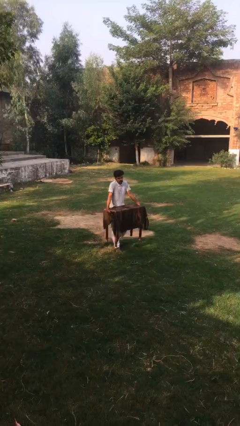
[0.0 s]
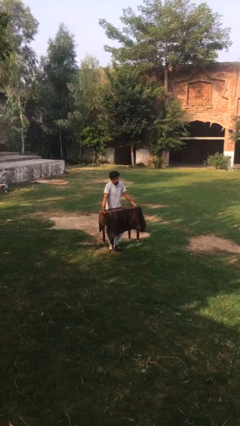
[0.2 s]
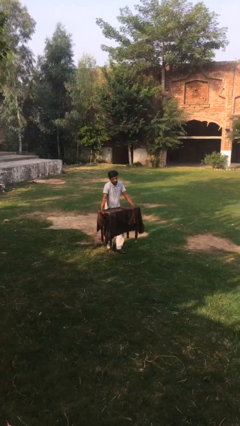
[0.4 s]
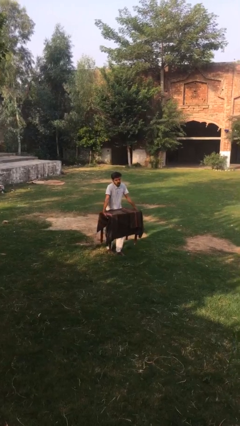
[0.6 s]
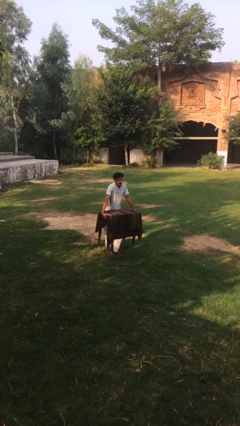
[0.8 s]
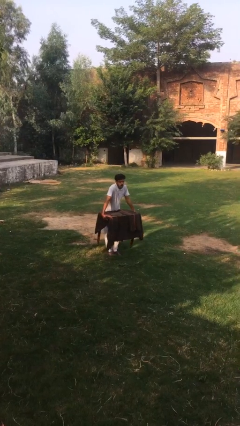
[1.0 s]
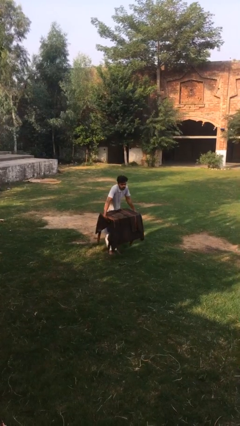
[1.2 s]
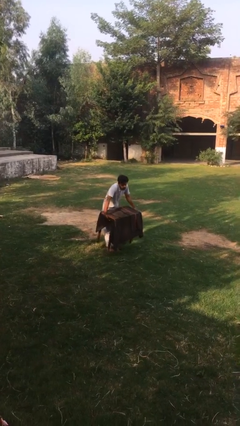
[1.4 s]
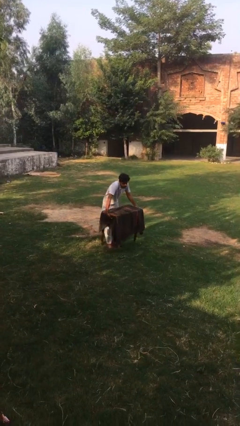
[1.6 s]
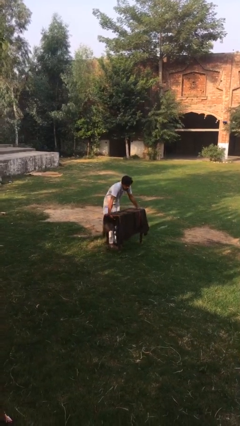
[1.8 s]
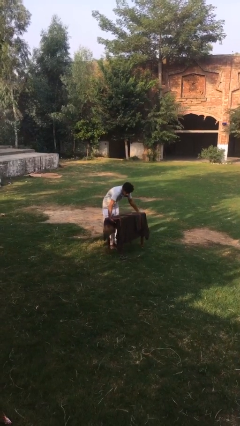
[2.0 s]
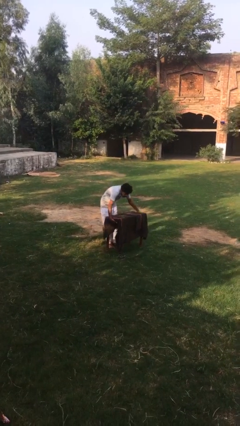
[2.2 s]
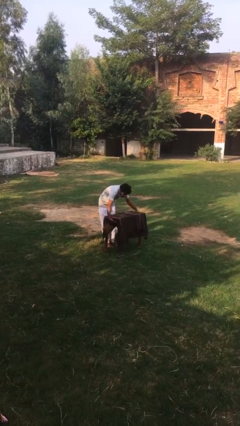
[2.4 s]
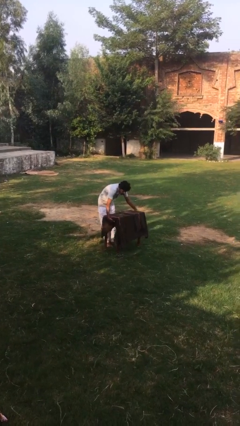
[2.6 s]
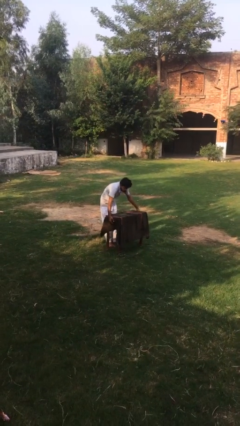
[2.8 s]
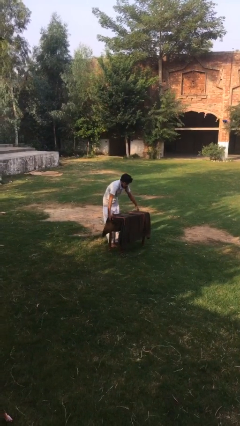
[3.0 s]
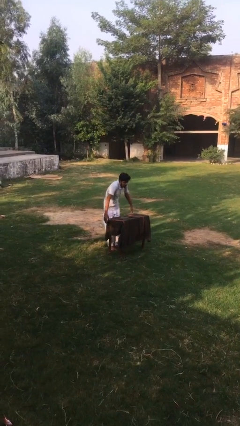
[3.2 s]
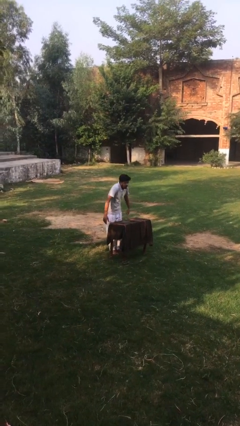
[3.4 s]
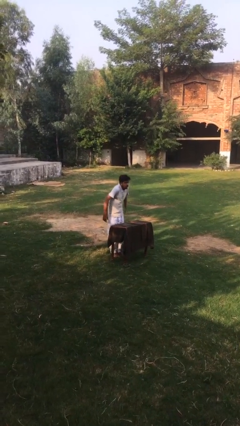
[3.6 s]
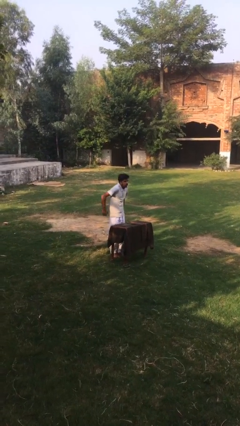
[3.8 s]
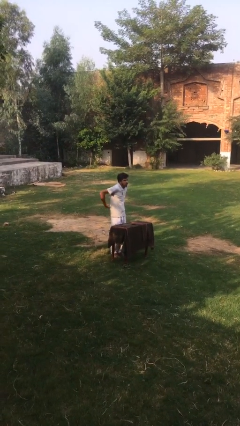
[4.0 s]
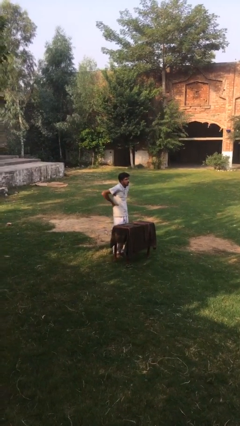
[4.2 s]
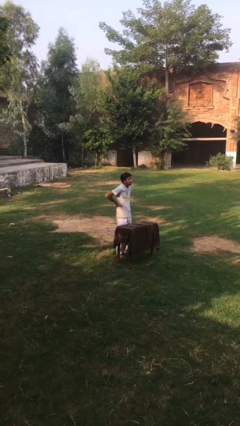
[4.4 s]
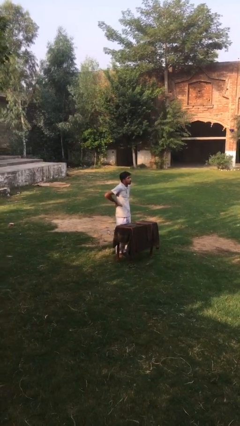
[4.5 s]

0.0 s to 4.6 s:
person puts down object on floor

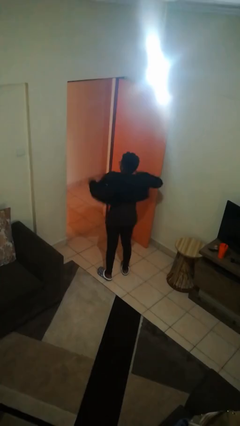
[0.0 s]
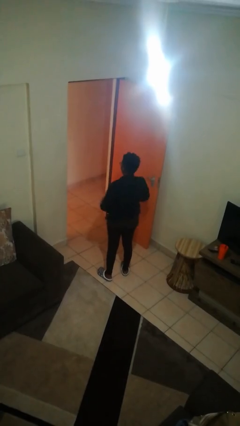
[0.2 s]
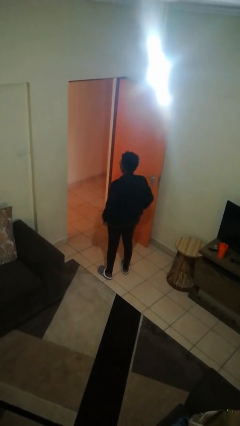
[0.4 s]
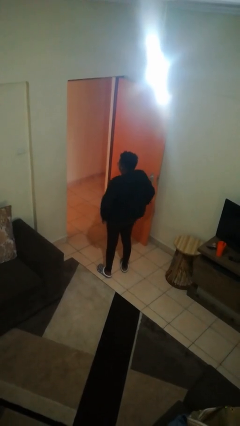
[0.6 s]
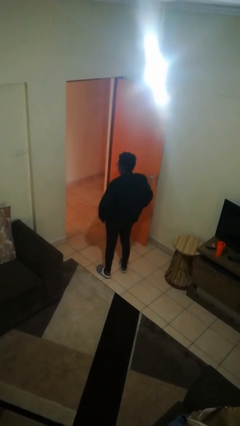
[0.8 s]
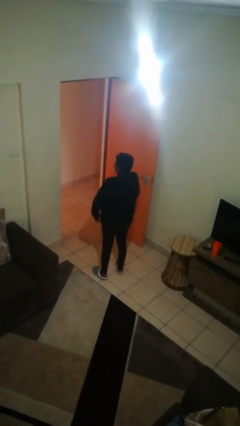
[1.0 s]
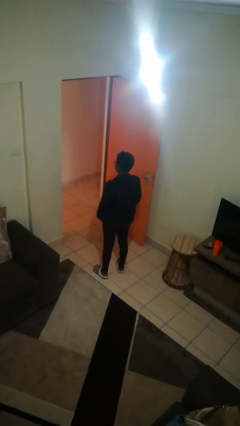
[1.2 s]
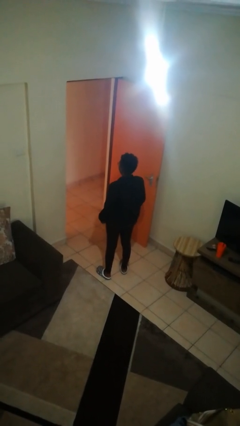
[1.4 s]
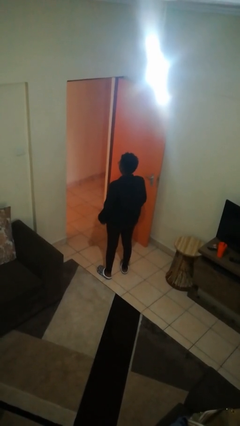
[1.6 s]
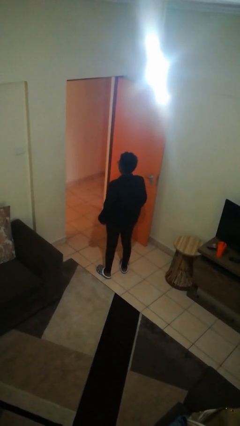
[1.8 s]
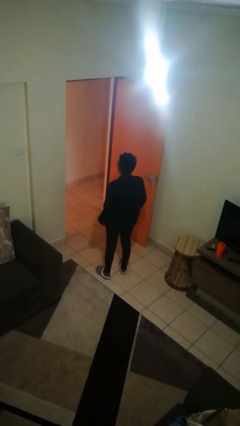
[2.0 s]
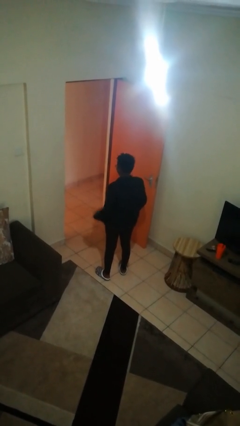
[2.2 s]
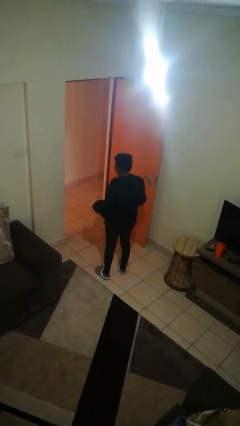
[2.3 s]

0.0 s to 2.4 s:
person puts on jacket

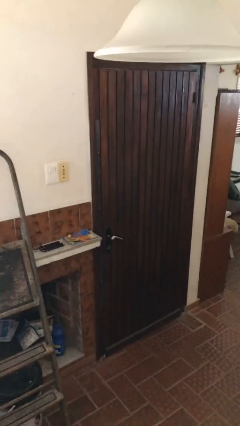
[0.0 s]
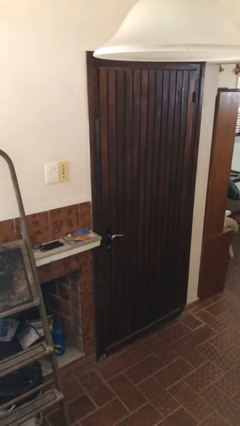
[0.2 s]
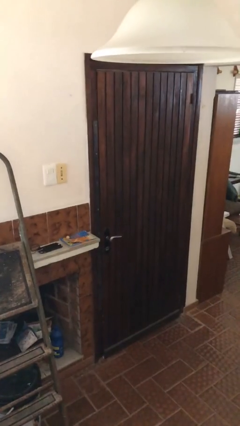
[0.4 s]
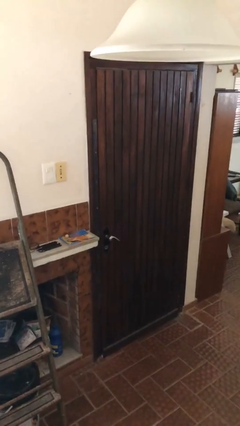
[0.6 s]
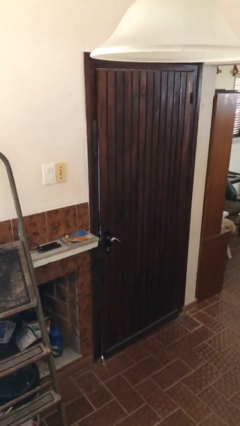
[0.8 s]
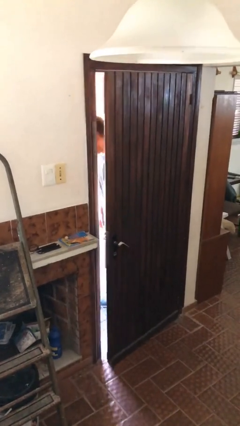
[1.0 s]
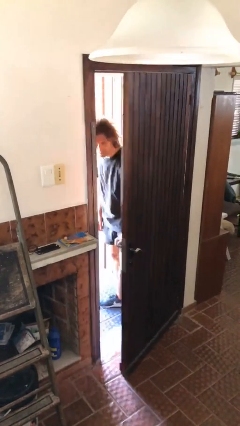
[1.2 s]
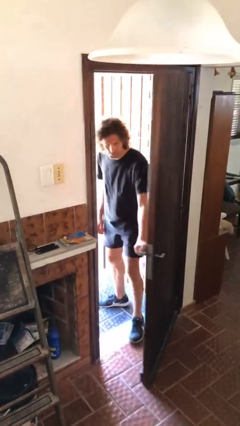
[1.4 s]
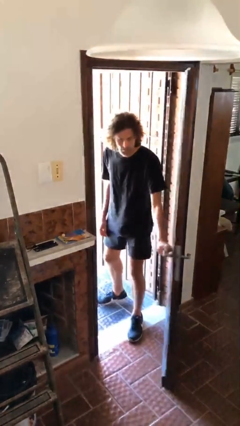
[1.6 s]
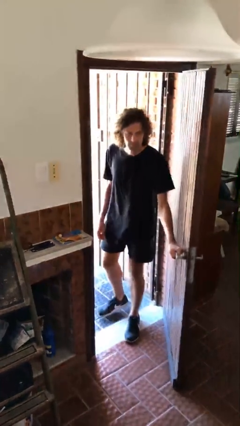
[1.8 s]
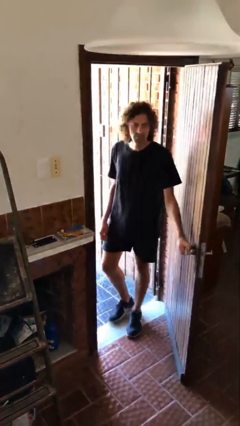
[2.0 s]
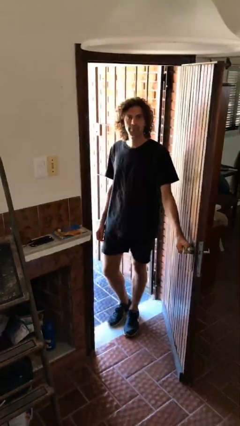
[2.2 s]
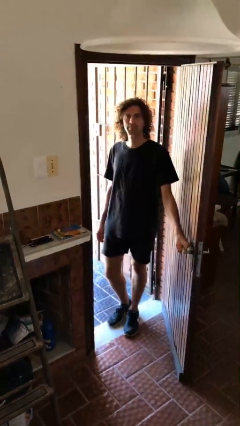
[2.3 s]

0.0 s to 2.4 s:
person opens facility door

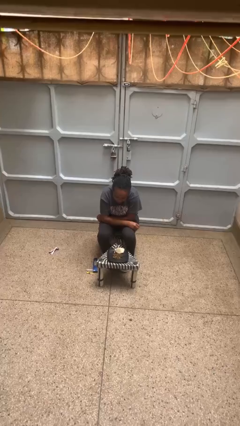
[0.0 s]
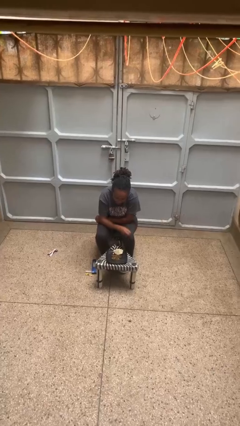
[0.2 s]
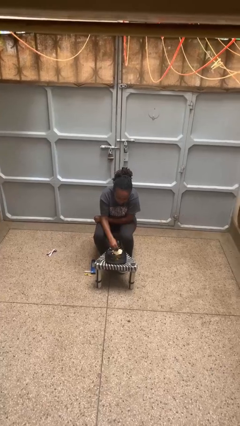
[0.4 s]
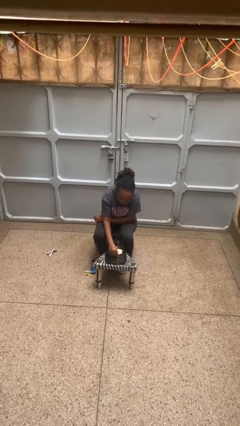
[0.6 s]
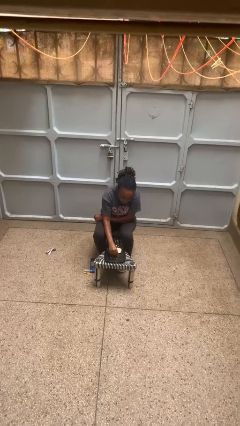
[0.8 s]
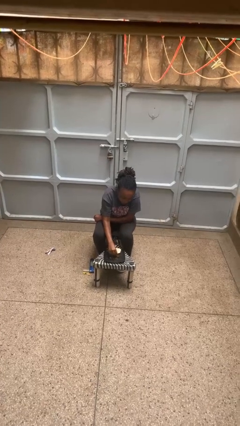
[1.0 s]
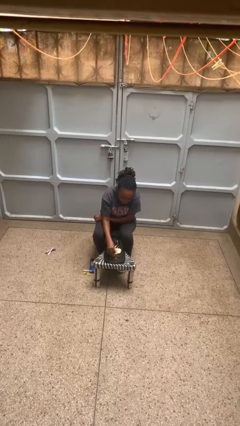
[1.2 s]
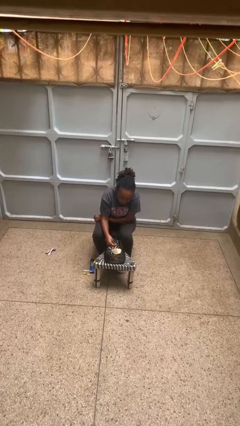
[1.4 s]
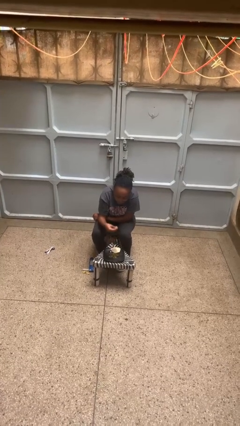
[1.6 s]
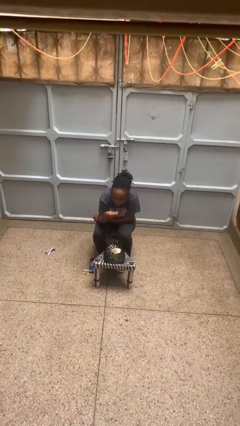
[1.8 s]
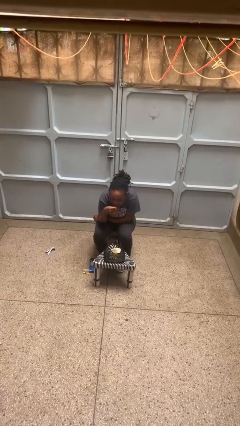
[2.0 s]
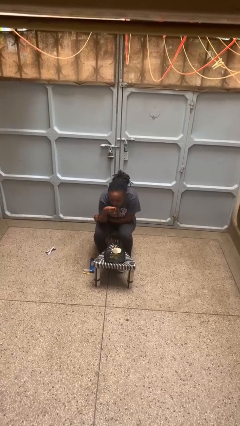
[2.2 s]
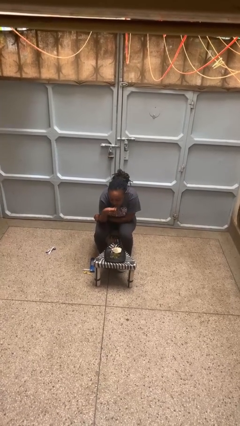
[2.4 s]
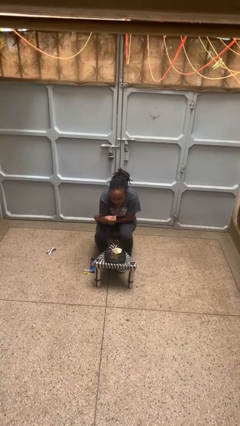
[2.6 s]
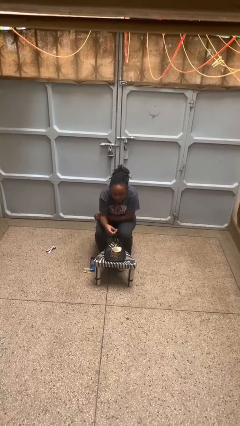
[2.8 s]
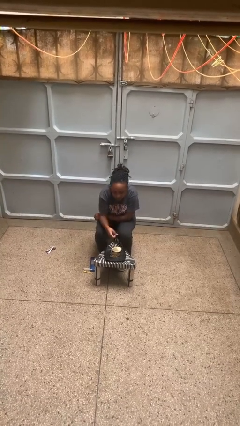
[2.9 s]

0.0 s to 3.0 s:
person eats with hands

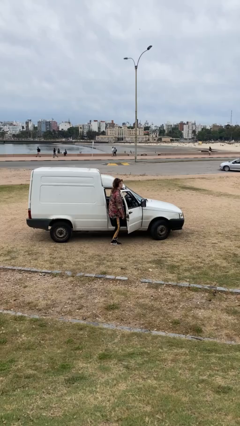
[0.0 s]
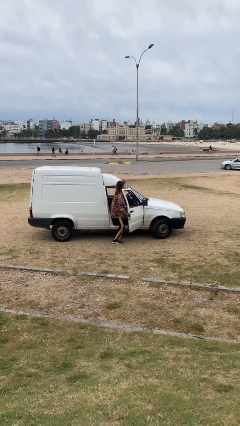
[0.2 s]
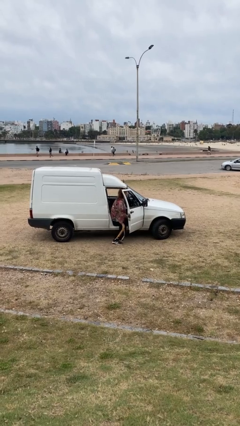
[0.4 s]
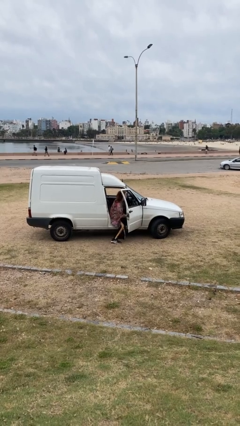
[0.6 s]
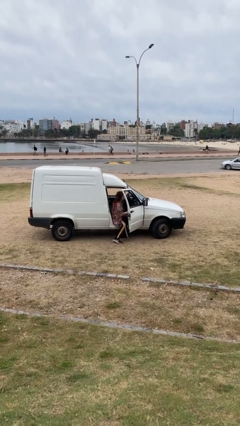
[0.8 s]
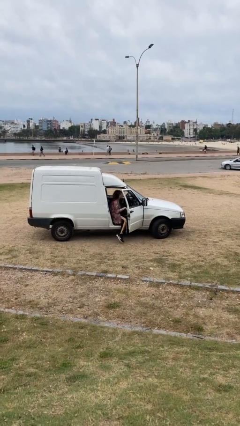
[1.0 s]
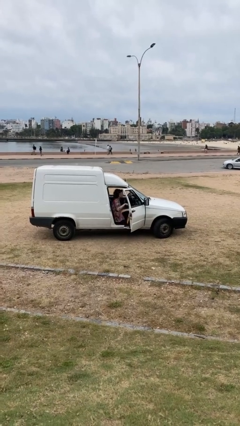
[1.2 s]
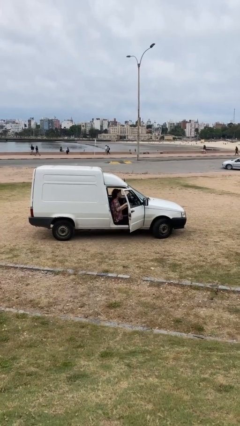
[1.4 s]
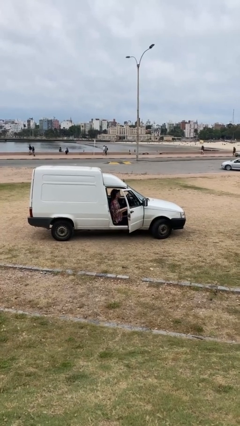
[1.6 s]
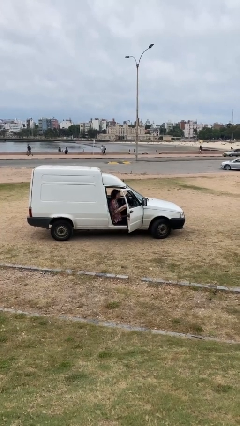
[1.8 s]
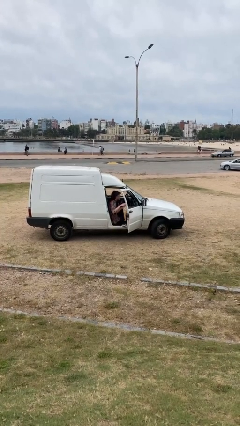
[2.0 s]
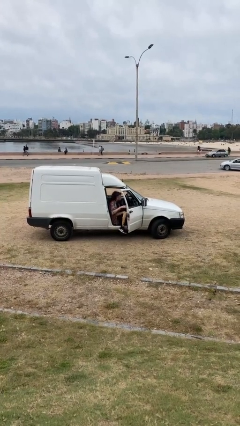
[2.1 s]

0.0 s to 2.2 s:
person enters car

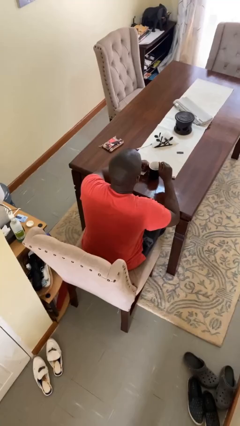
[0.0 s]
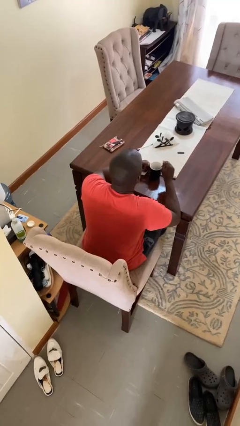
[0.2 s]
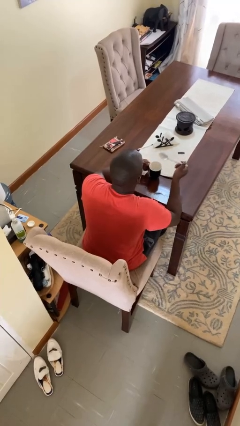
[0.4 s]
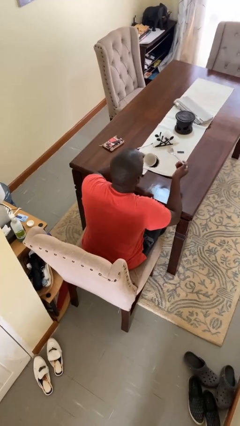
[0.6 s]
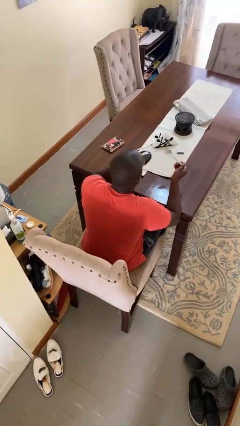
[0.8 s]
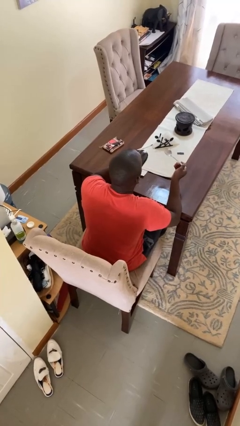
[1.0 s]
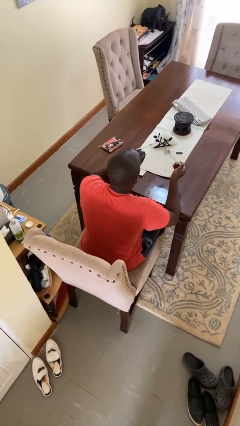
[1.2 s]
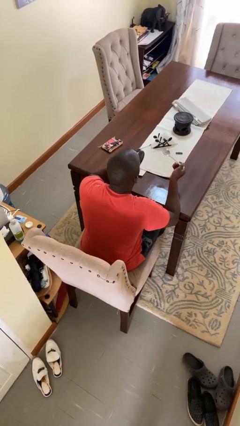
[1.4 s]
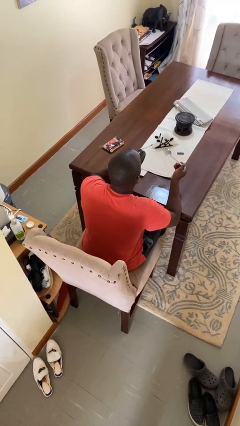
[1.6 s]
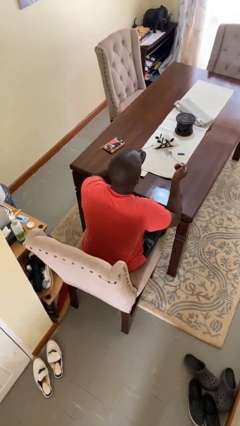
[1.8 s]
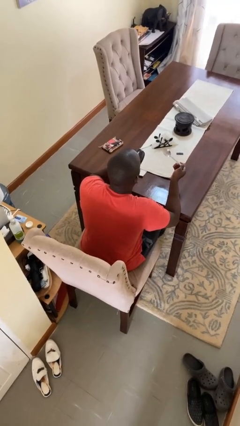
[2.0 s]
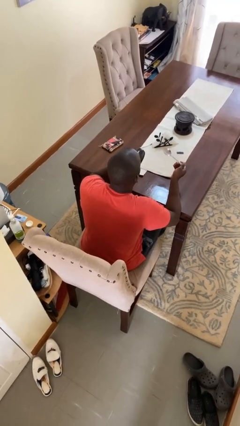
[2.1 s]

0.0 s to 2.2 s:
person drinks from mug

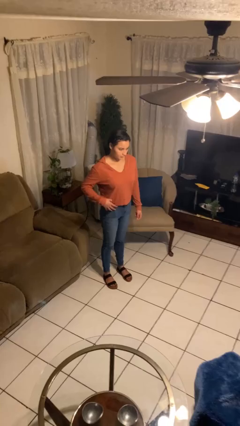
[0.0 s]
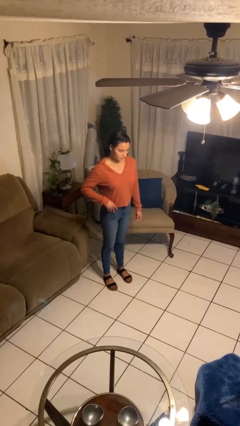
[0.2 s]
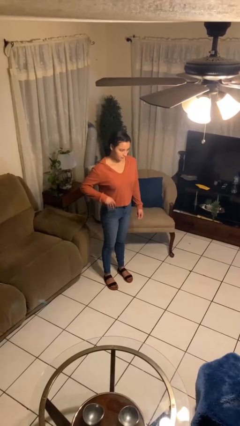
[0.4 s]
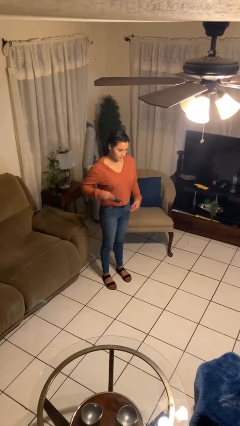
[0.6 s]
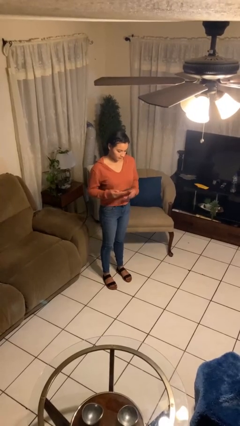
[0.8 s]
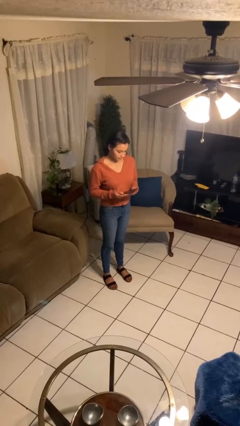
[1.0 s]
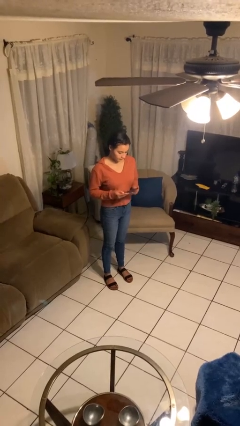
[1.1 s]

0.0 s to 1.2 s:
person takes phone from pocket
